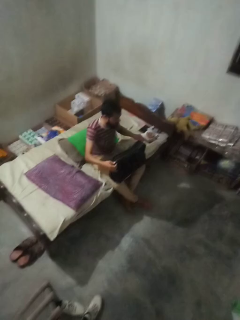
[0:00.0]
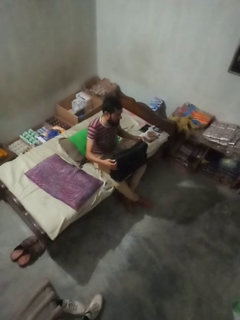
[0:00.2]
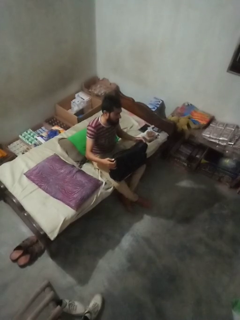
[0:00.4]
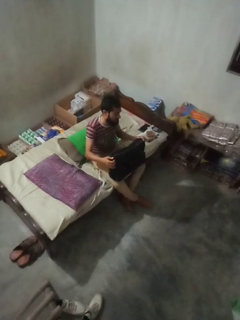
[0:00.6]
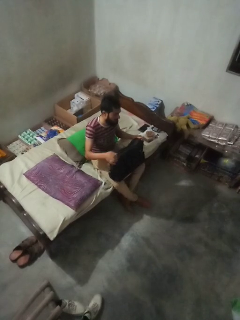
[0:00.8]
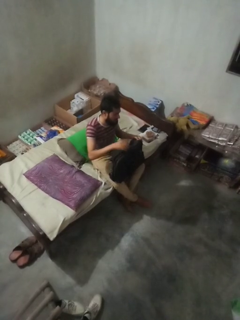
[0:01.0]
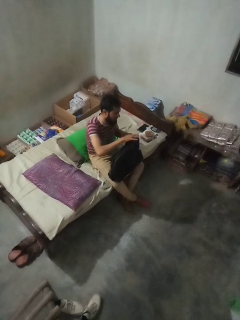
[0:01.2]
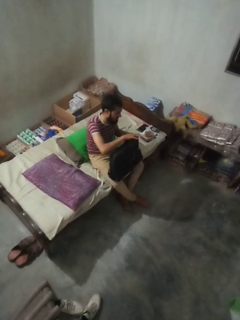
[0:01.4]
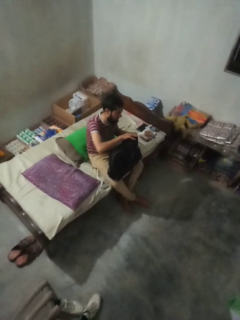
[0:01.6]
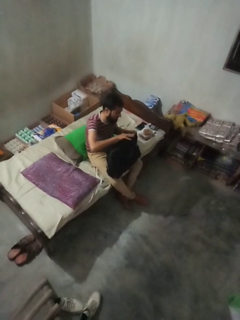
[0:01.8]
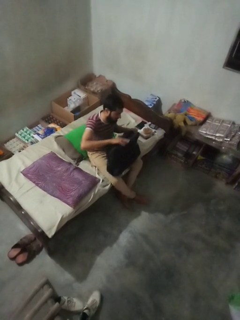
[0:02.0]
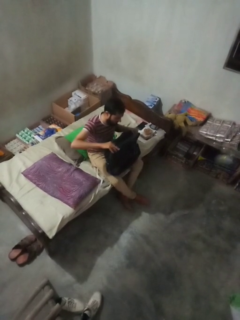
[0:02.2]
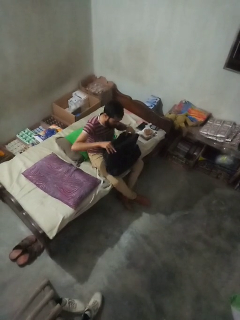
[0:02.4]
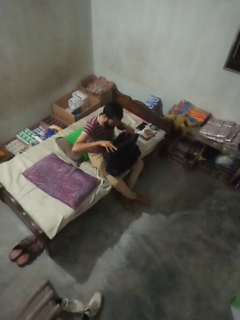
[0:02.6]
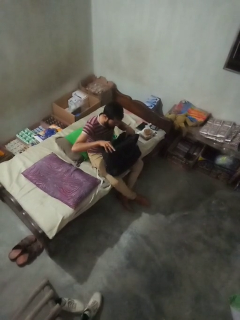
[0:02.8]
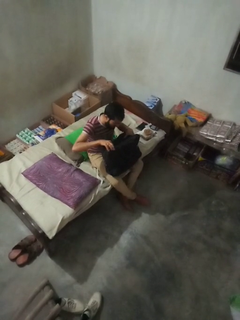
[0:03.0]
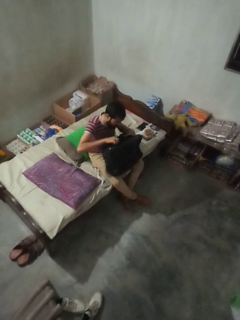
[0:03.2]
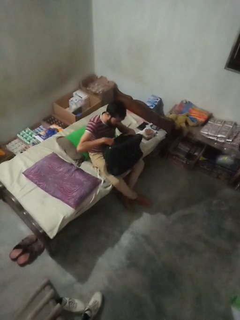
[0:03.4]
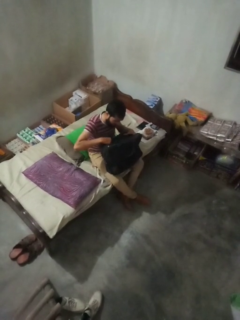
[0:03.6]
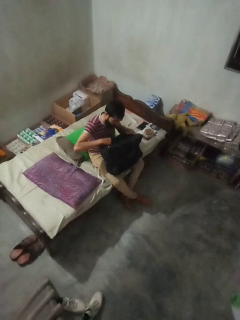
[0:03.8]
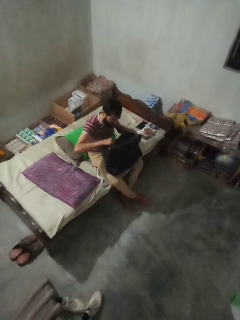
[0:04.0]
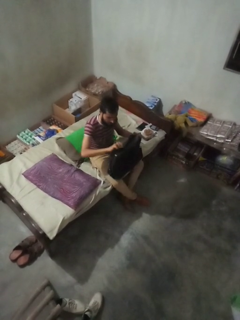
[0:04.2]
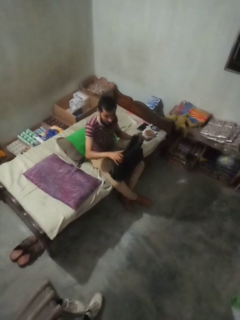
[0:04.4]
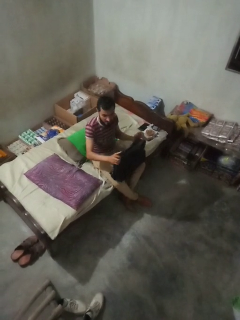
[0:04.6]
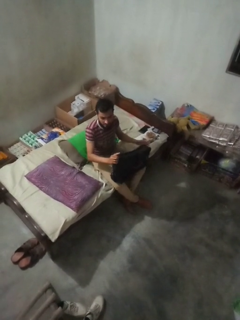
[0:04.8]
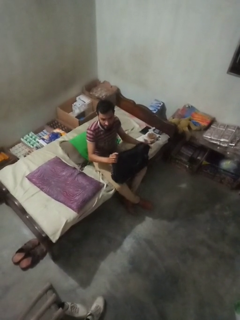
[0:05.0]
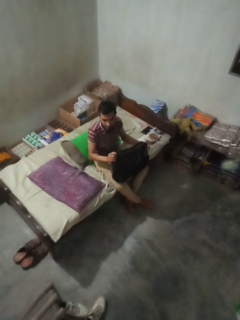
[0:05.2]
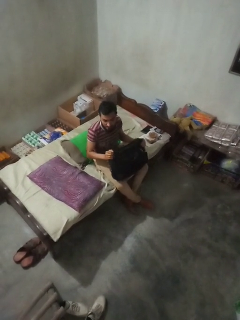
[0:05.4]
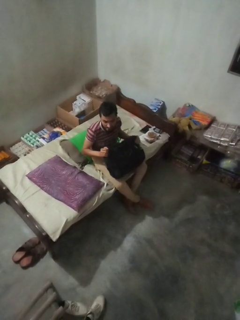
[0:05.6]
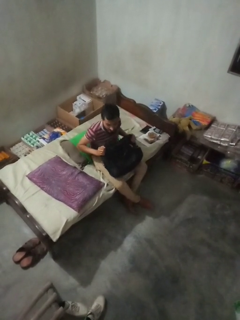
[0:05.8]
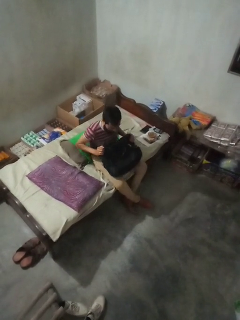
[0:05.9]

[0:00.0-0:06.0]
person searches in bag

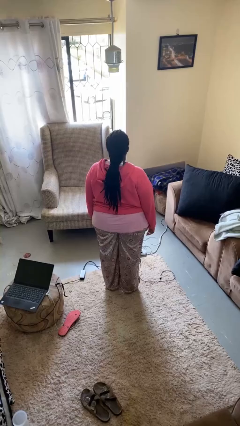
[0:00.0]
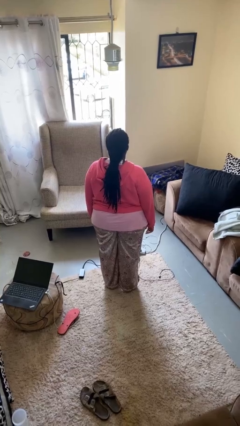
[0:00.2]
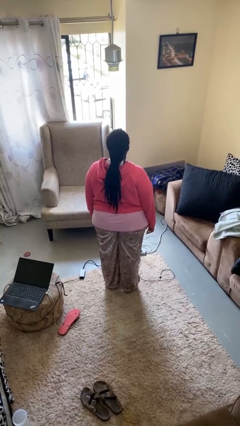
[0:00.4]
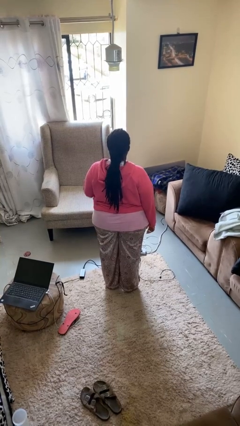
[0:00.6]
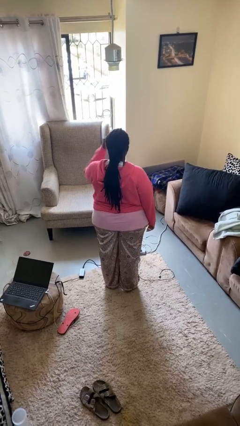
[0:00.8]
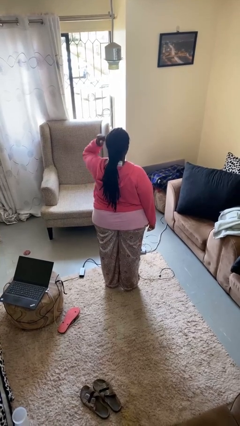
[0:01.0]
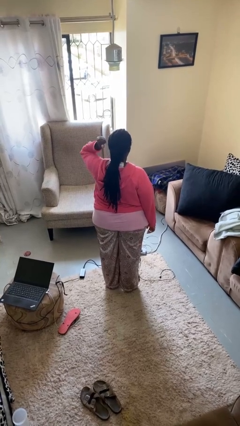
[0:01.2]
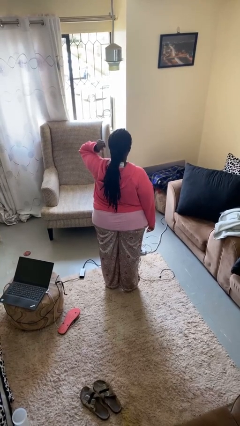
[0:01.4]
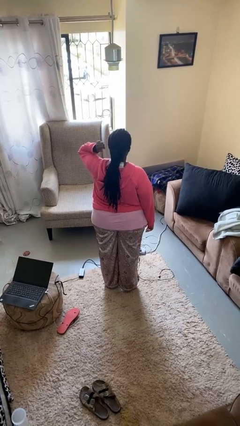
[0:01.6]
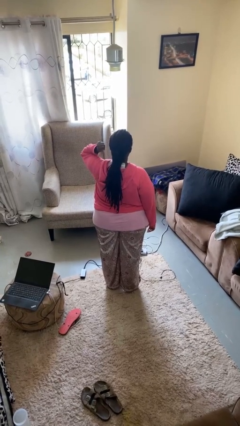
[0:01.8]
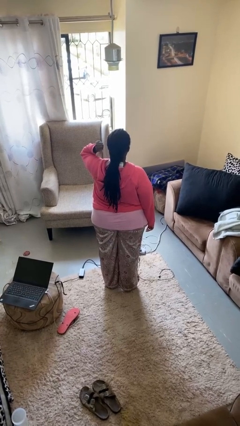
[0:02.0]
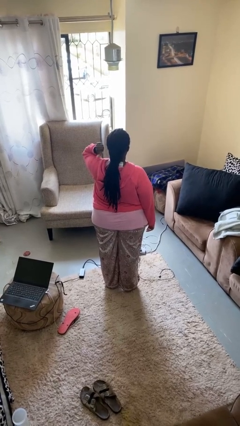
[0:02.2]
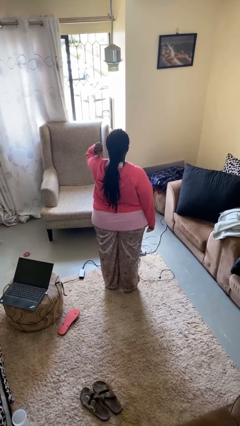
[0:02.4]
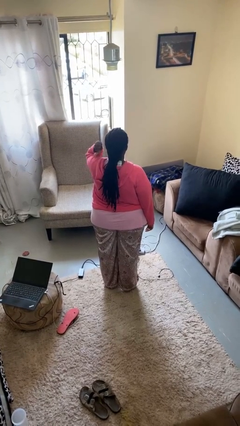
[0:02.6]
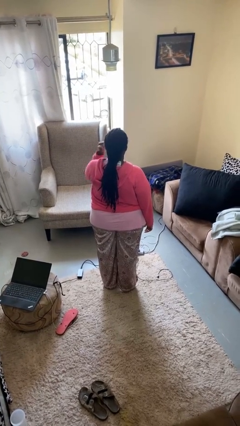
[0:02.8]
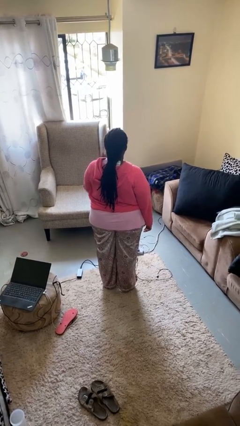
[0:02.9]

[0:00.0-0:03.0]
person gestures behind me

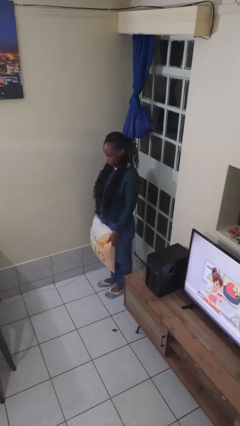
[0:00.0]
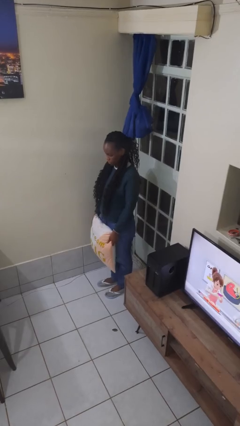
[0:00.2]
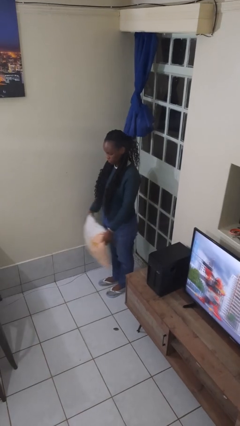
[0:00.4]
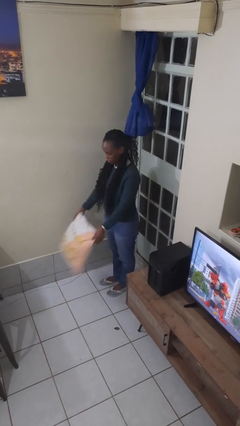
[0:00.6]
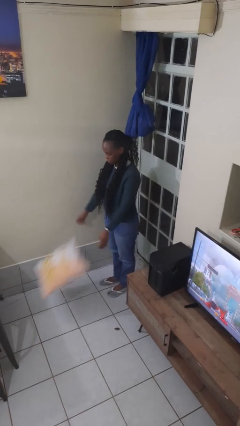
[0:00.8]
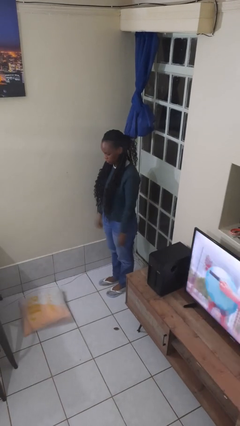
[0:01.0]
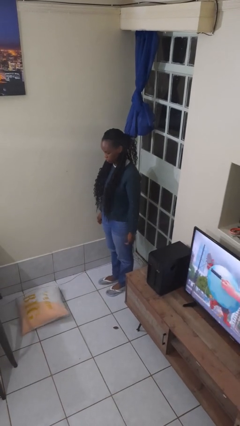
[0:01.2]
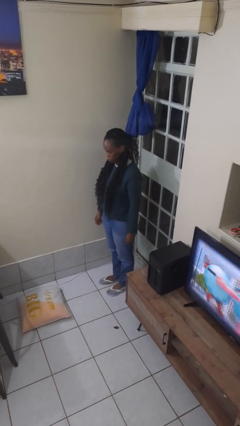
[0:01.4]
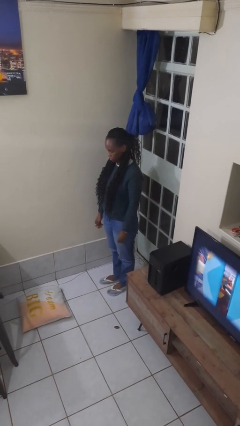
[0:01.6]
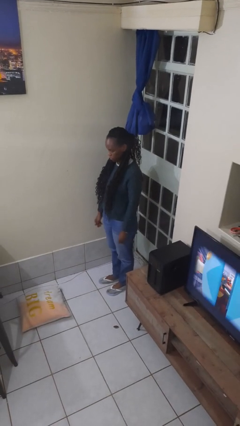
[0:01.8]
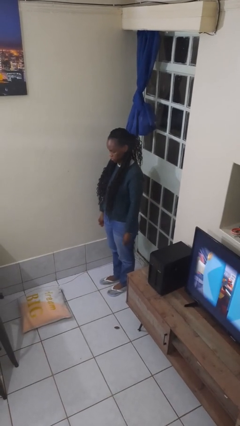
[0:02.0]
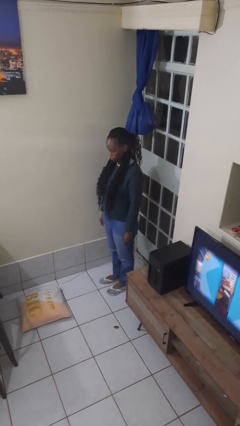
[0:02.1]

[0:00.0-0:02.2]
person throws object to ground

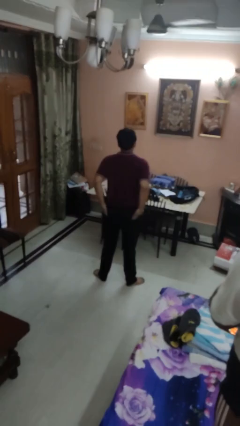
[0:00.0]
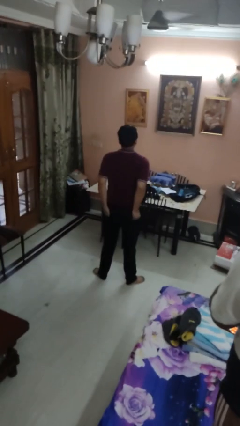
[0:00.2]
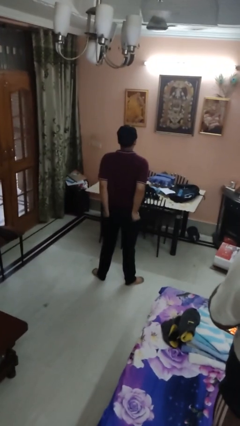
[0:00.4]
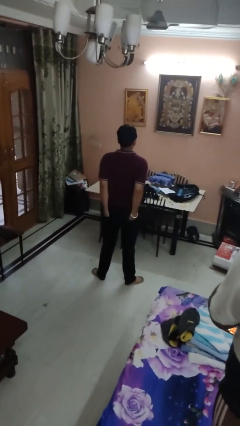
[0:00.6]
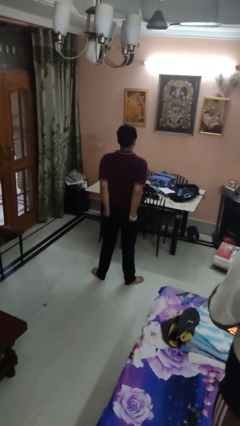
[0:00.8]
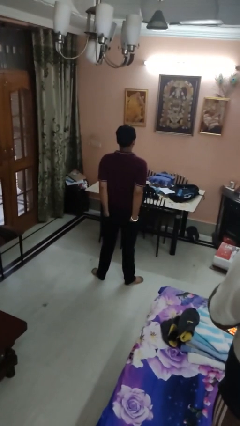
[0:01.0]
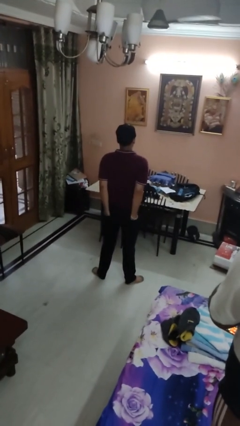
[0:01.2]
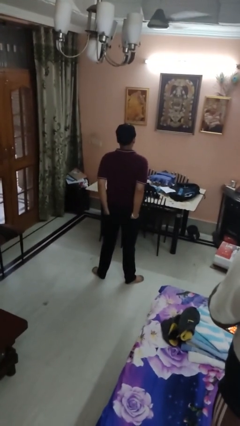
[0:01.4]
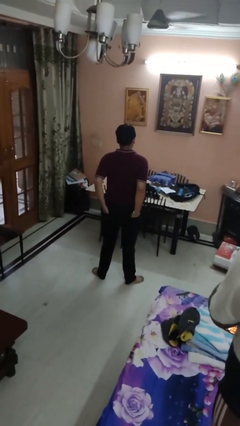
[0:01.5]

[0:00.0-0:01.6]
person puts hands in back pockets

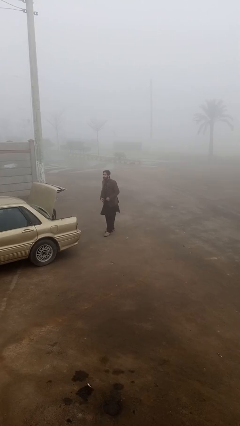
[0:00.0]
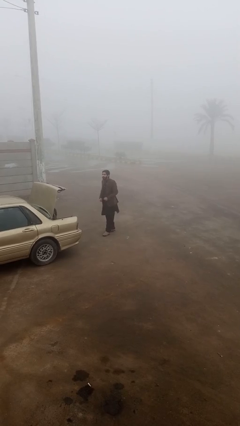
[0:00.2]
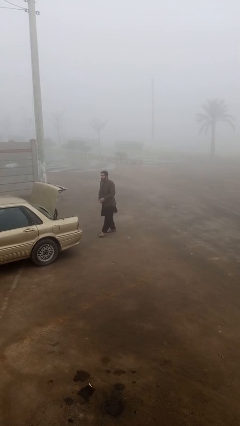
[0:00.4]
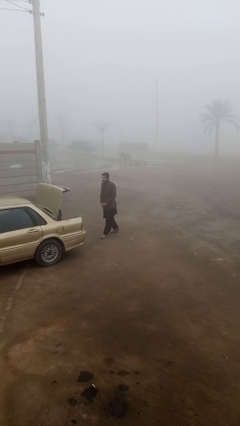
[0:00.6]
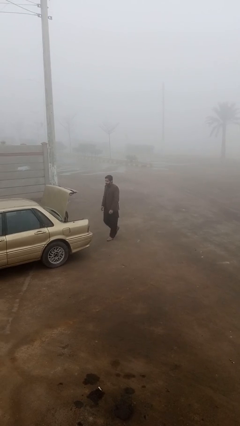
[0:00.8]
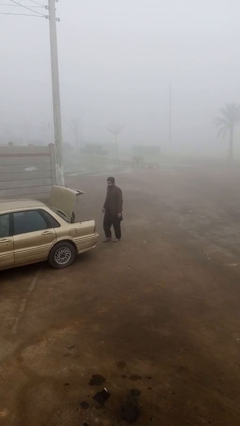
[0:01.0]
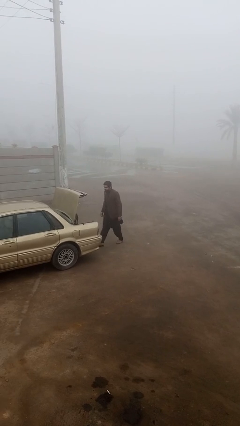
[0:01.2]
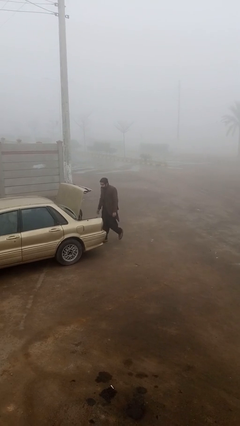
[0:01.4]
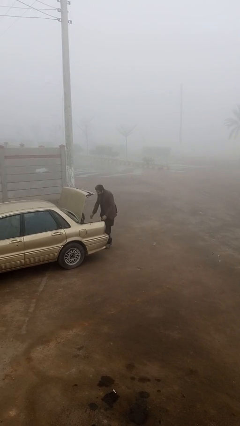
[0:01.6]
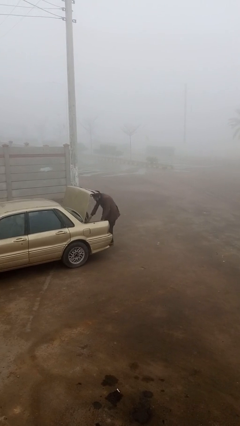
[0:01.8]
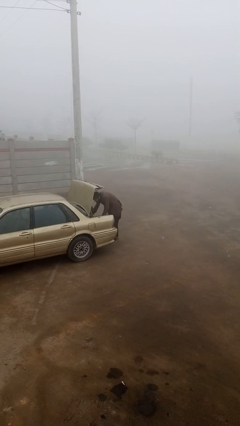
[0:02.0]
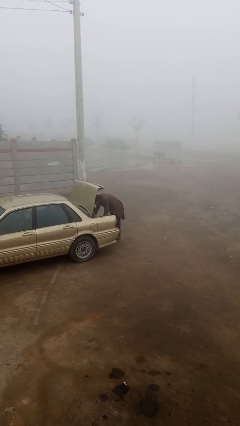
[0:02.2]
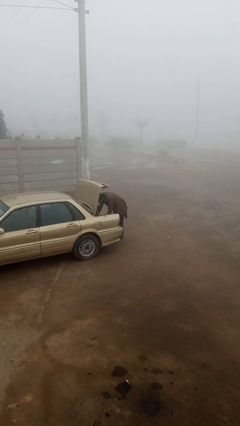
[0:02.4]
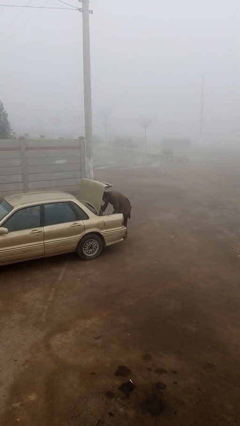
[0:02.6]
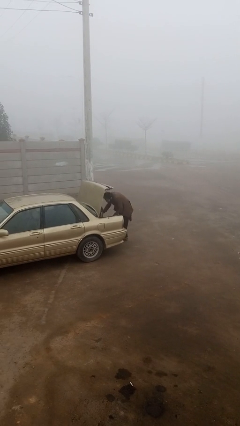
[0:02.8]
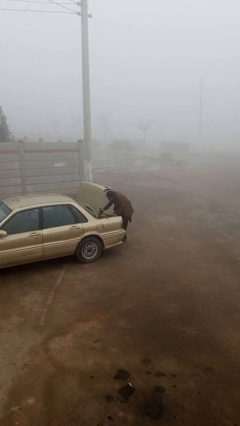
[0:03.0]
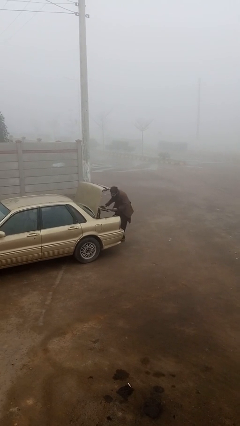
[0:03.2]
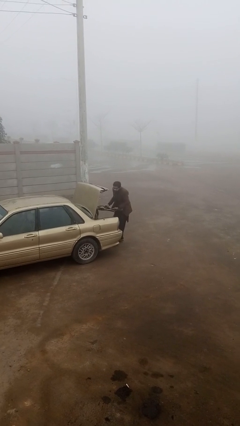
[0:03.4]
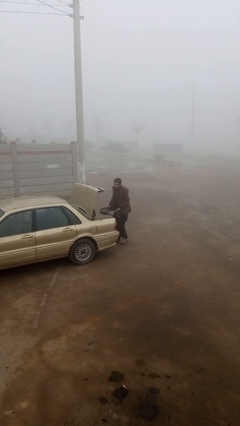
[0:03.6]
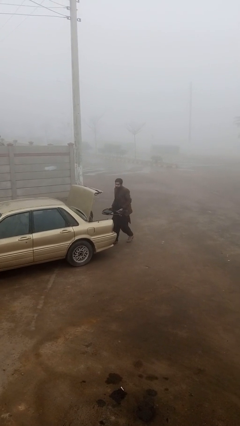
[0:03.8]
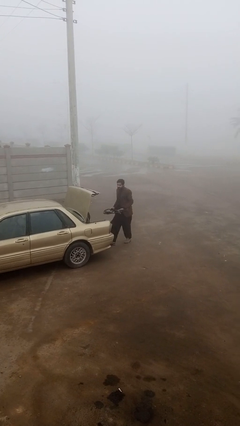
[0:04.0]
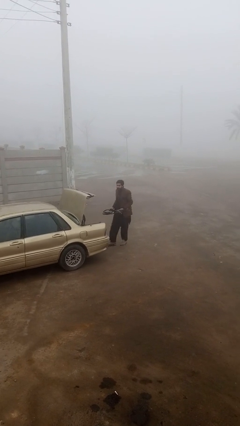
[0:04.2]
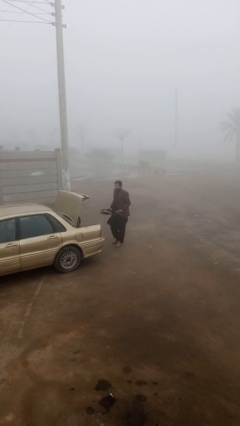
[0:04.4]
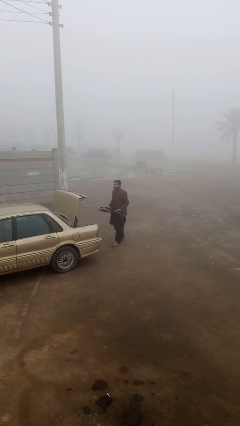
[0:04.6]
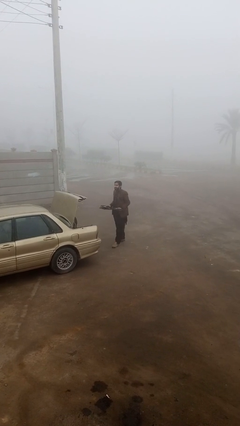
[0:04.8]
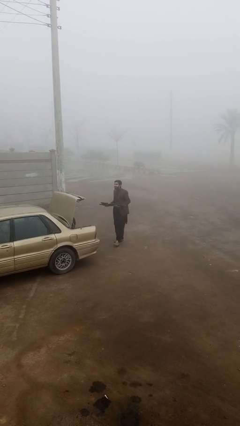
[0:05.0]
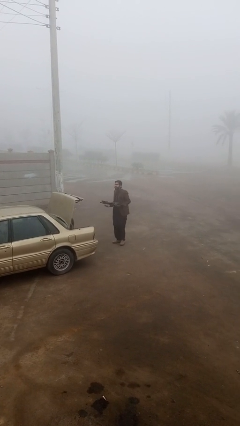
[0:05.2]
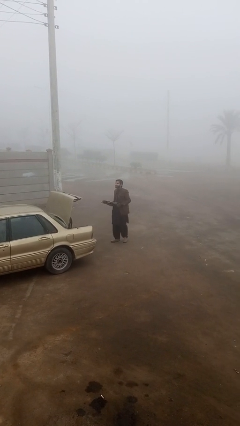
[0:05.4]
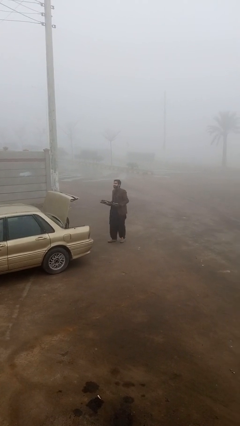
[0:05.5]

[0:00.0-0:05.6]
person unloads car

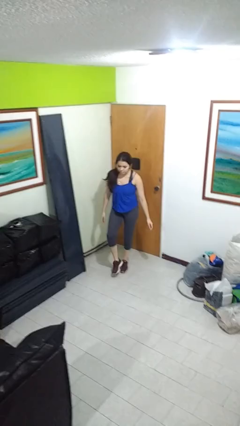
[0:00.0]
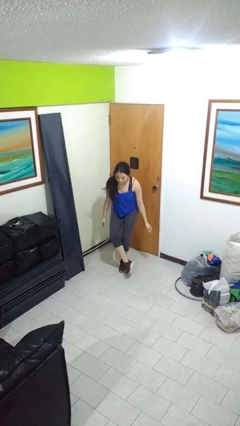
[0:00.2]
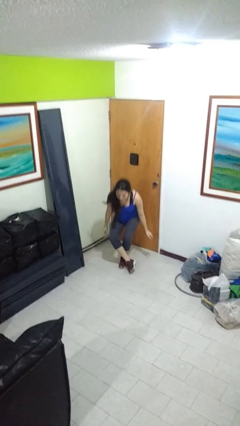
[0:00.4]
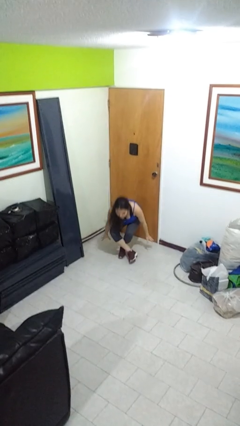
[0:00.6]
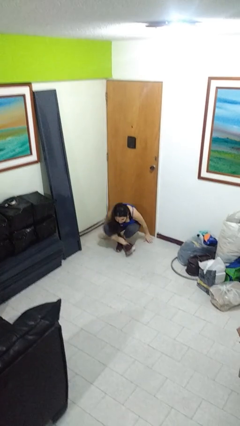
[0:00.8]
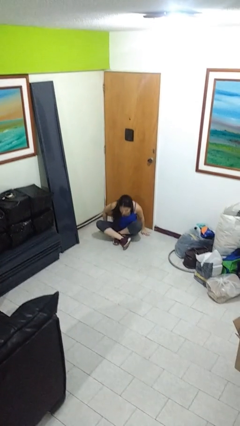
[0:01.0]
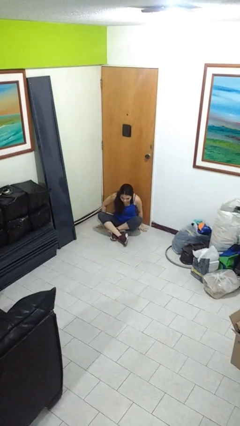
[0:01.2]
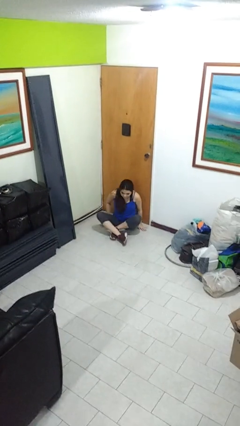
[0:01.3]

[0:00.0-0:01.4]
person sits crisscross
